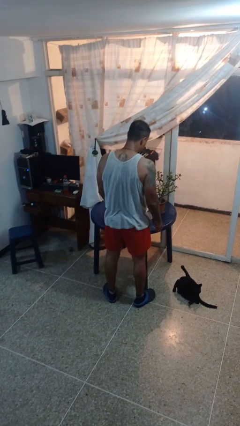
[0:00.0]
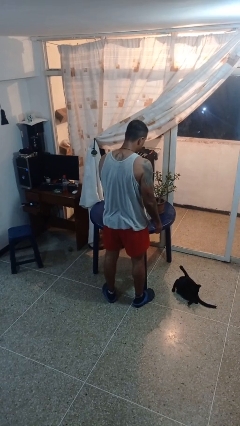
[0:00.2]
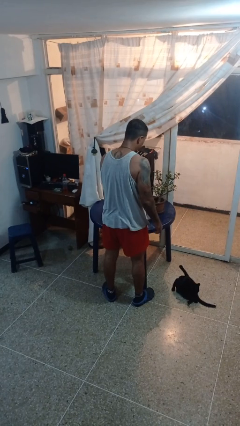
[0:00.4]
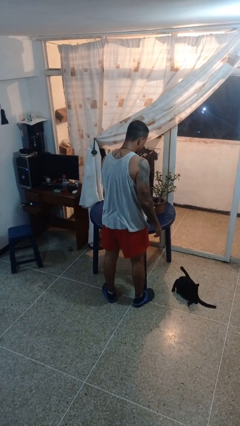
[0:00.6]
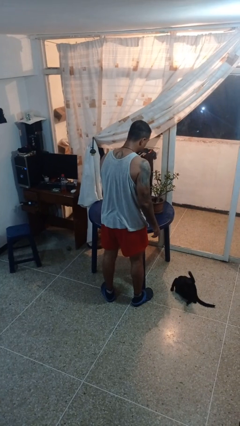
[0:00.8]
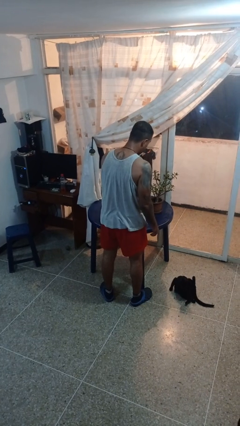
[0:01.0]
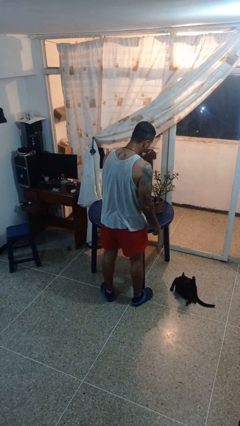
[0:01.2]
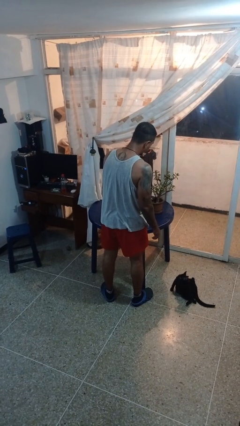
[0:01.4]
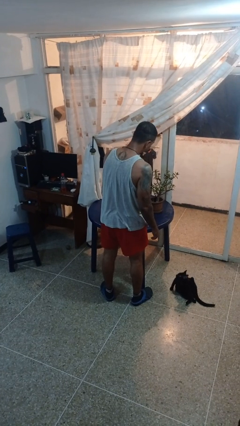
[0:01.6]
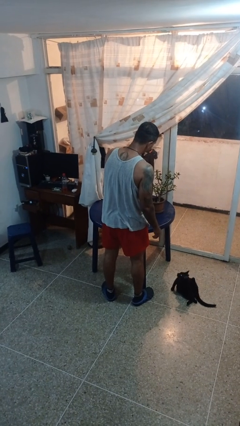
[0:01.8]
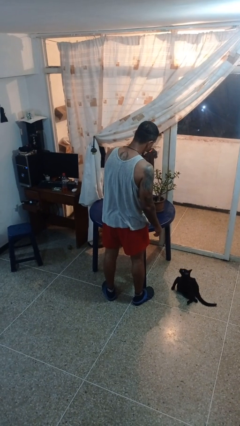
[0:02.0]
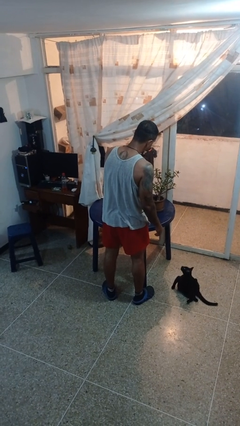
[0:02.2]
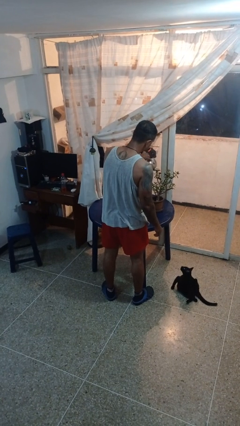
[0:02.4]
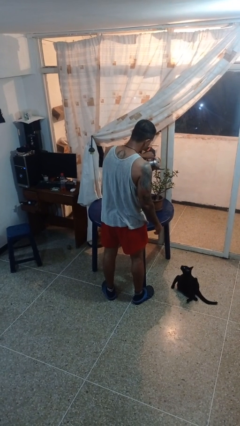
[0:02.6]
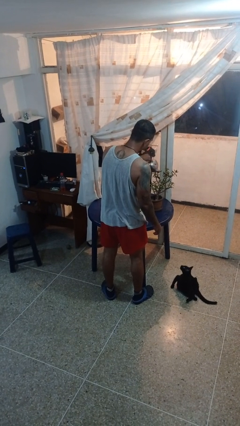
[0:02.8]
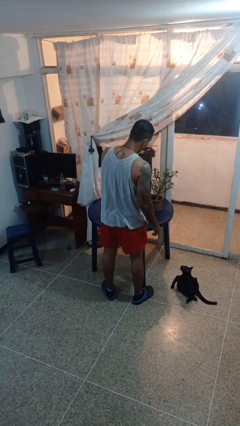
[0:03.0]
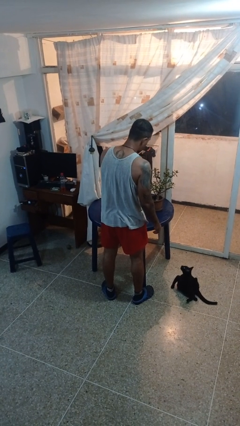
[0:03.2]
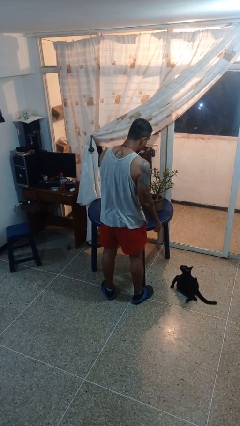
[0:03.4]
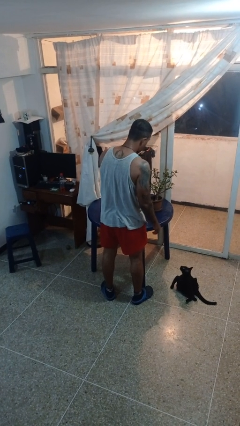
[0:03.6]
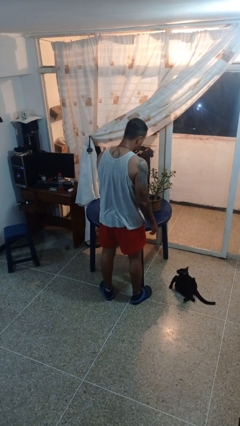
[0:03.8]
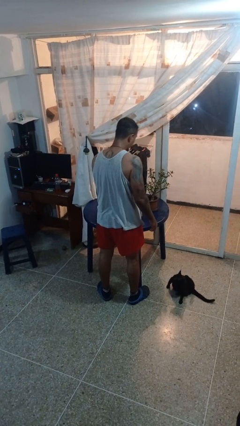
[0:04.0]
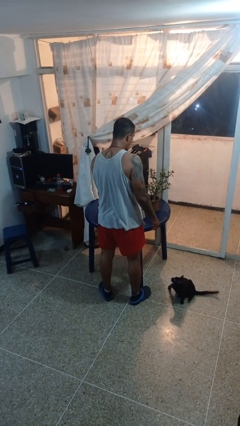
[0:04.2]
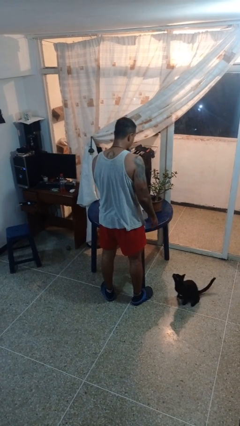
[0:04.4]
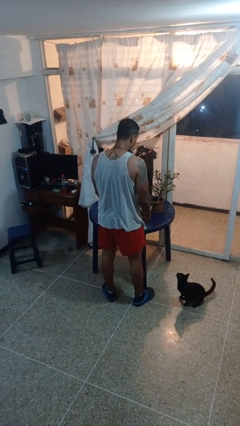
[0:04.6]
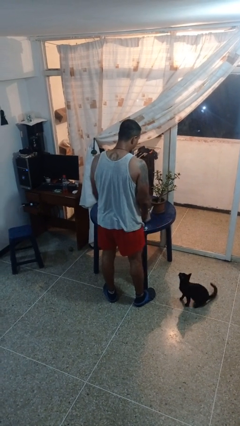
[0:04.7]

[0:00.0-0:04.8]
person waters houseplant

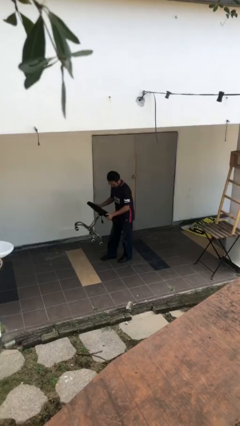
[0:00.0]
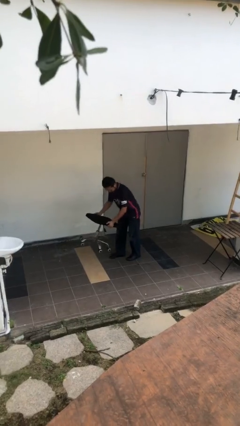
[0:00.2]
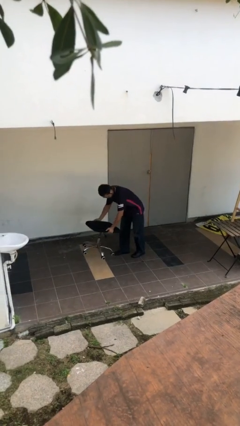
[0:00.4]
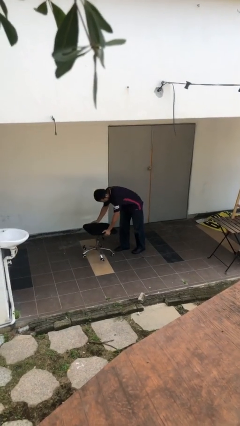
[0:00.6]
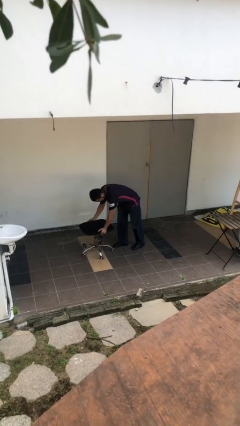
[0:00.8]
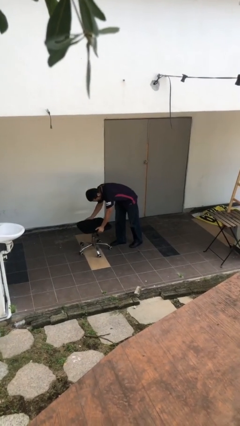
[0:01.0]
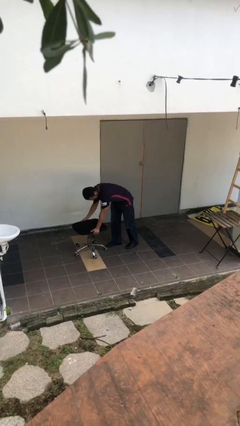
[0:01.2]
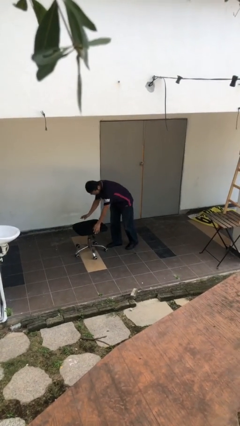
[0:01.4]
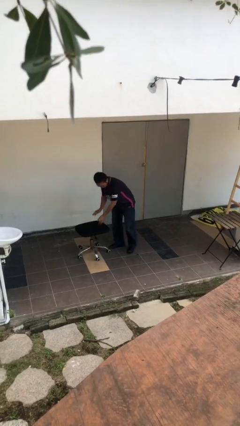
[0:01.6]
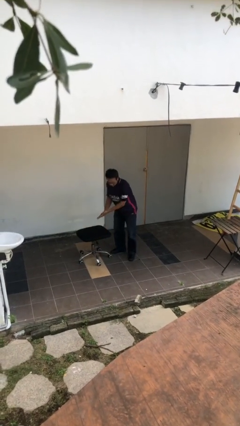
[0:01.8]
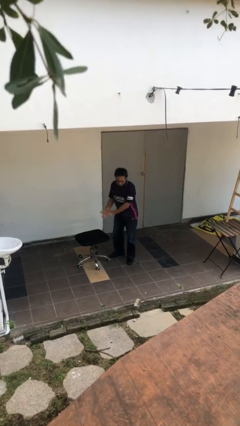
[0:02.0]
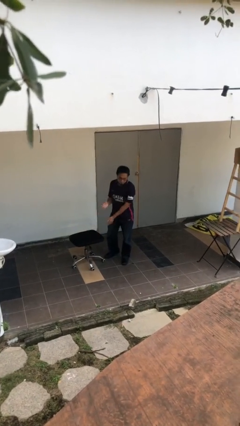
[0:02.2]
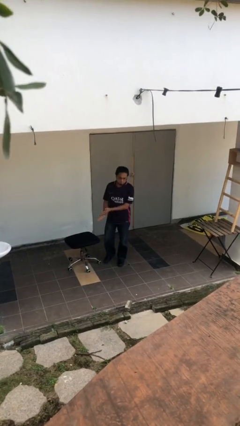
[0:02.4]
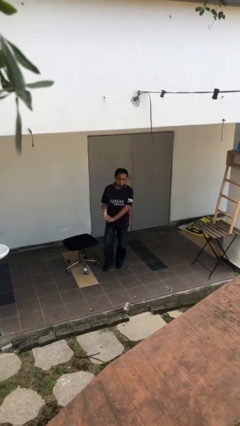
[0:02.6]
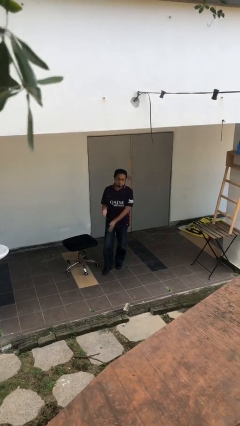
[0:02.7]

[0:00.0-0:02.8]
person puts down object on floor

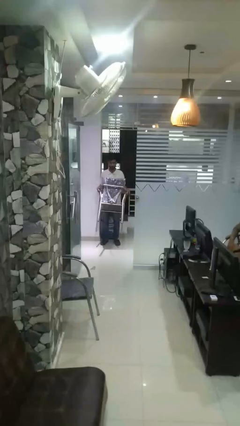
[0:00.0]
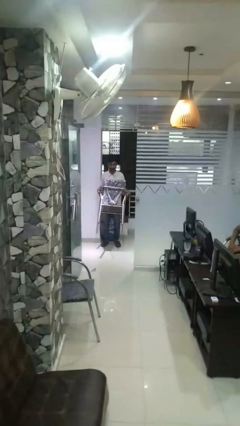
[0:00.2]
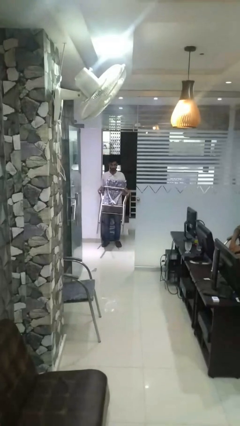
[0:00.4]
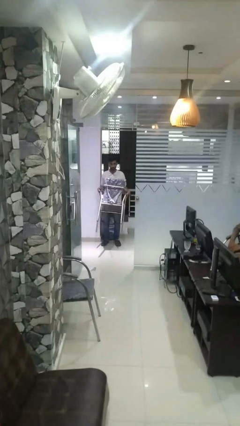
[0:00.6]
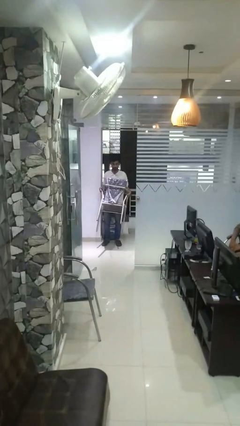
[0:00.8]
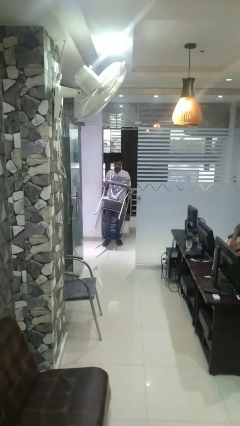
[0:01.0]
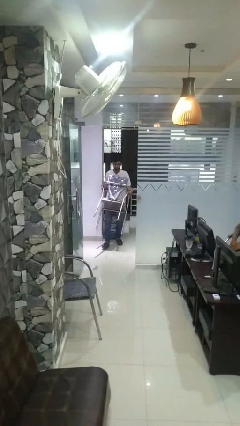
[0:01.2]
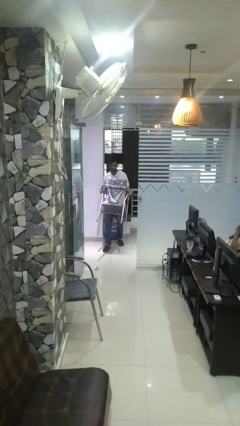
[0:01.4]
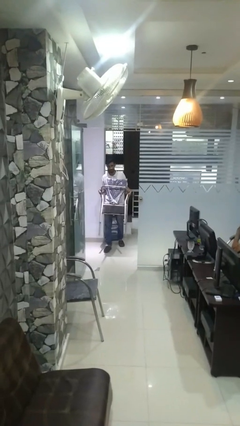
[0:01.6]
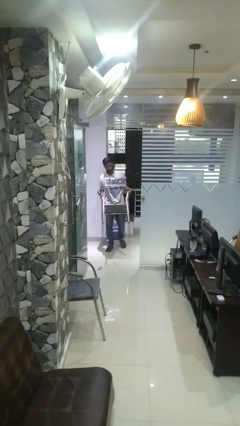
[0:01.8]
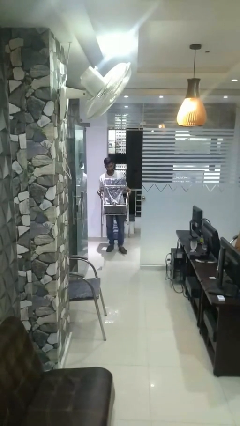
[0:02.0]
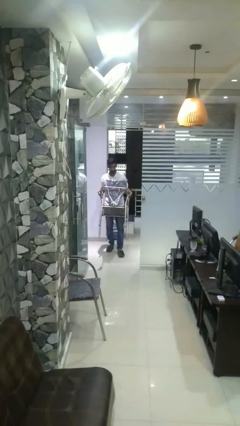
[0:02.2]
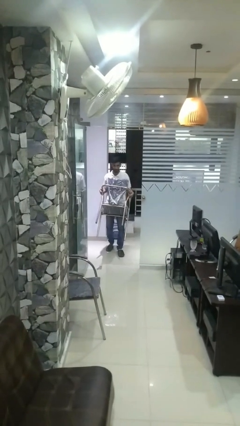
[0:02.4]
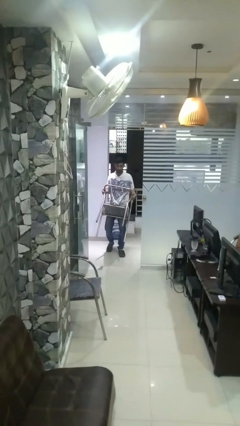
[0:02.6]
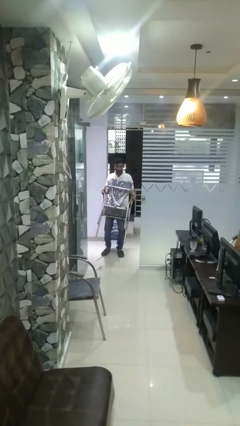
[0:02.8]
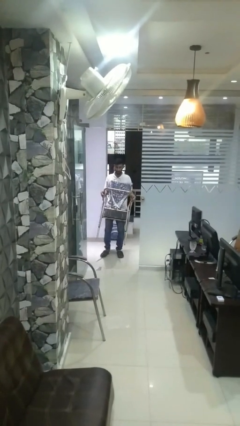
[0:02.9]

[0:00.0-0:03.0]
person carries furniture

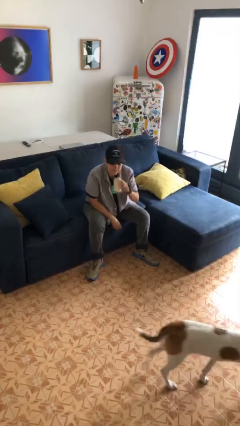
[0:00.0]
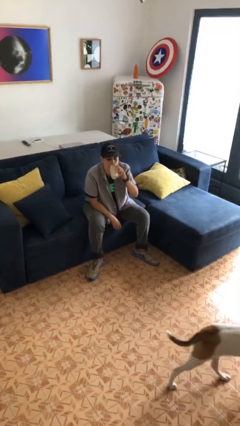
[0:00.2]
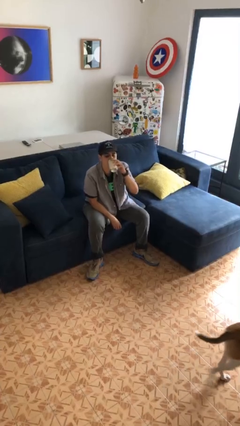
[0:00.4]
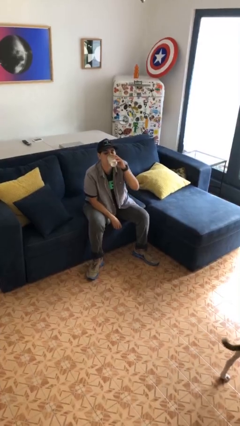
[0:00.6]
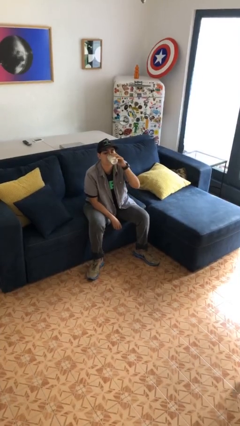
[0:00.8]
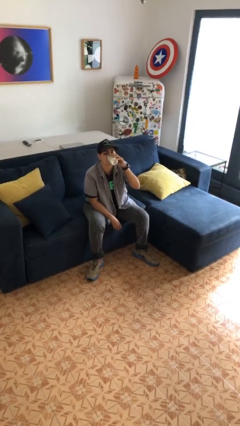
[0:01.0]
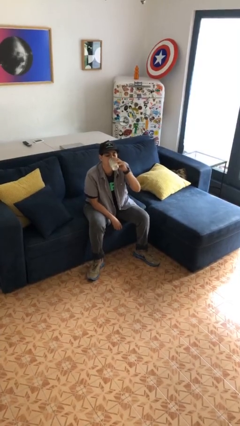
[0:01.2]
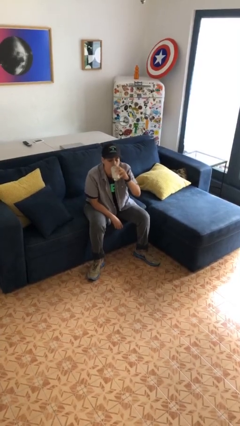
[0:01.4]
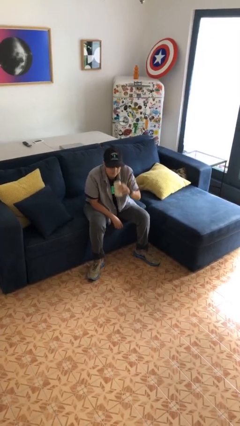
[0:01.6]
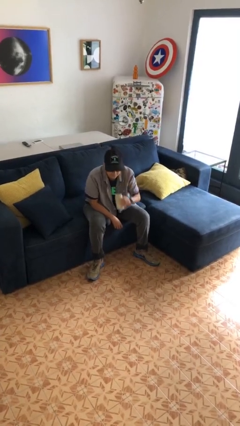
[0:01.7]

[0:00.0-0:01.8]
person drinks from beverage can

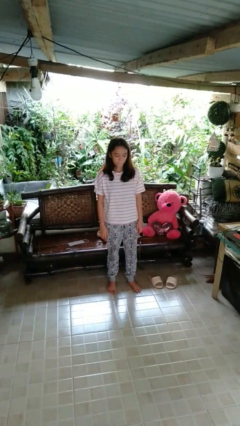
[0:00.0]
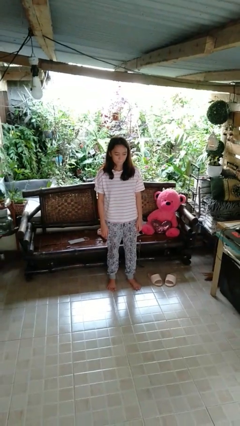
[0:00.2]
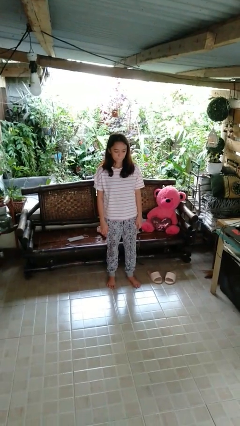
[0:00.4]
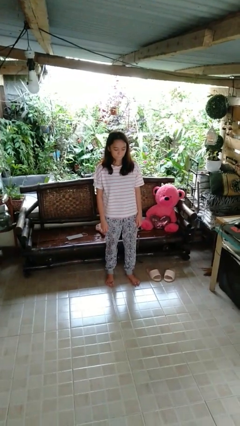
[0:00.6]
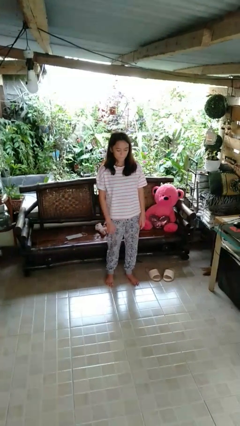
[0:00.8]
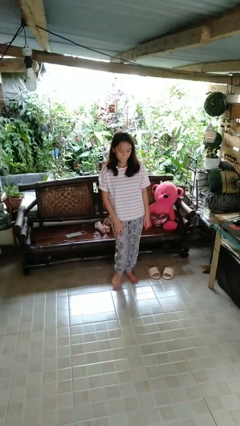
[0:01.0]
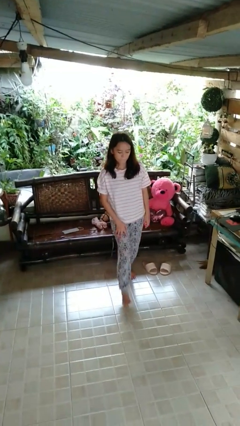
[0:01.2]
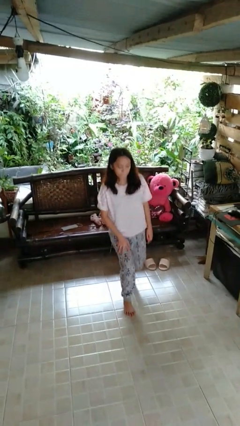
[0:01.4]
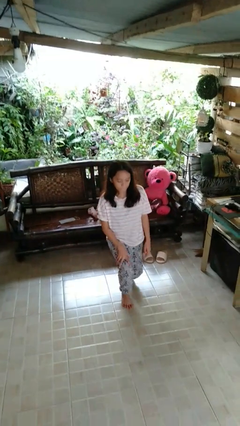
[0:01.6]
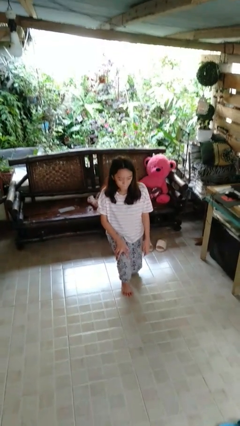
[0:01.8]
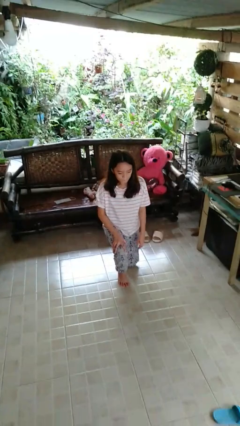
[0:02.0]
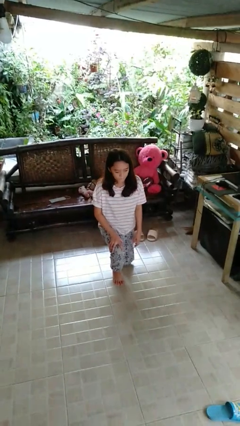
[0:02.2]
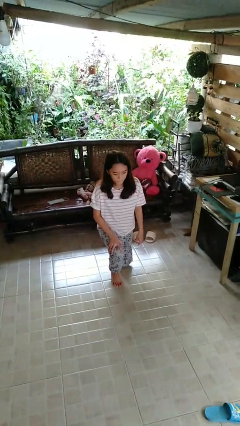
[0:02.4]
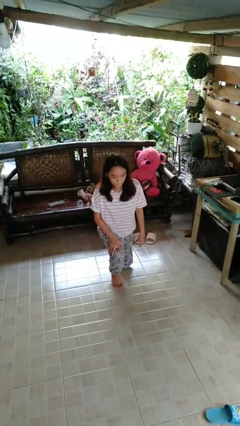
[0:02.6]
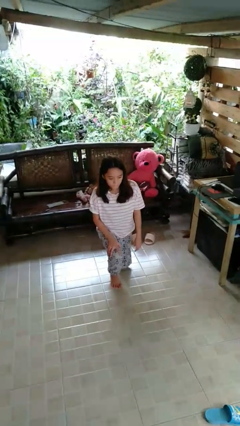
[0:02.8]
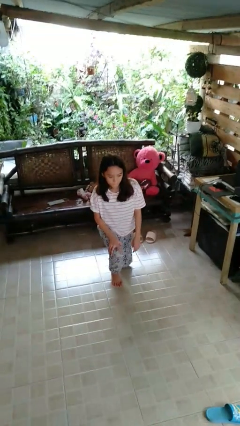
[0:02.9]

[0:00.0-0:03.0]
person kneels

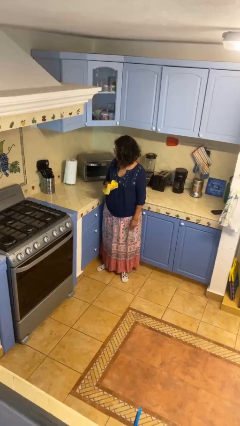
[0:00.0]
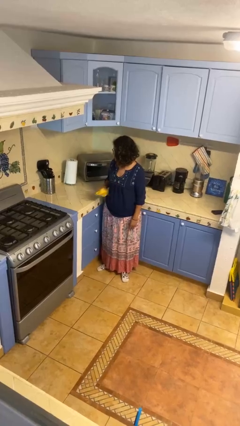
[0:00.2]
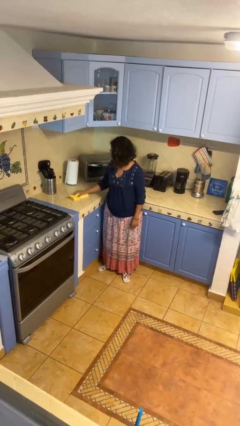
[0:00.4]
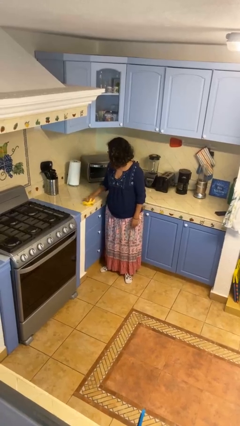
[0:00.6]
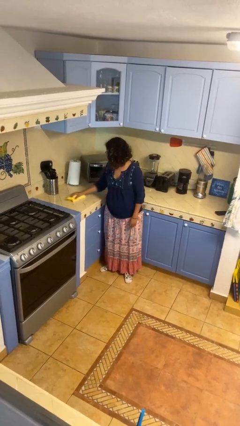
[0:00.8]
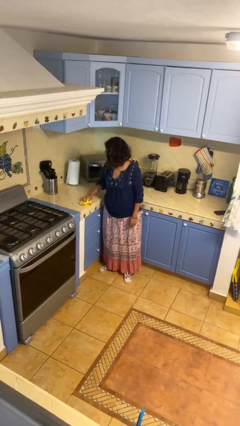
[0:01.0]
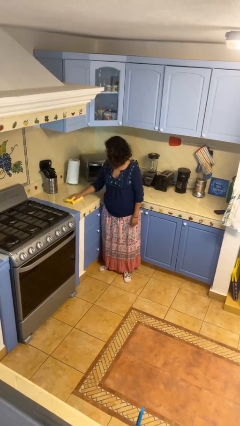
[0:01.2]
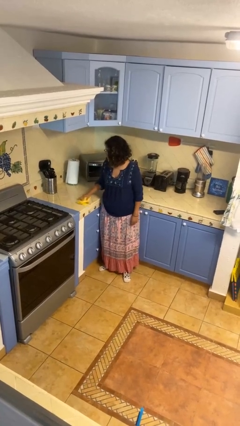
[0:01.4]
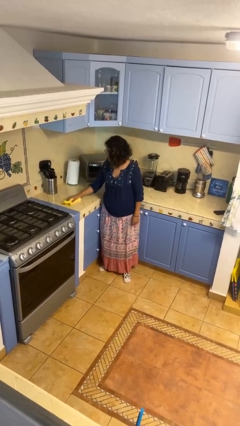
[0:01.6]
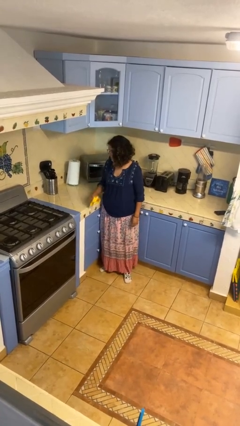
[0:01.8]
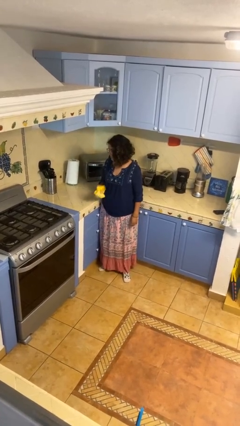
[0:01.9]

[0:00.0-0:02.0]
person cleans table with rag
